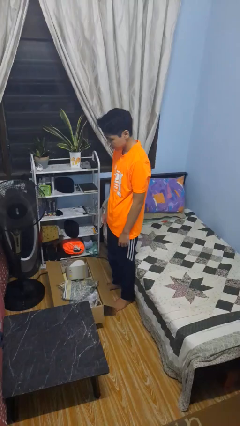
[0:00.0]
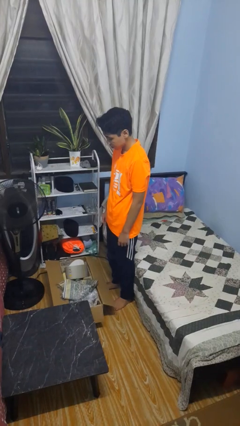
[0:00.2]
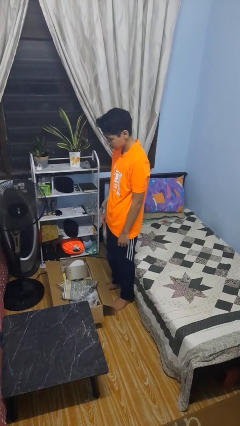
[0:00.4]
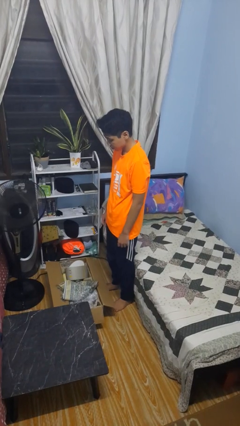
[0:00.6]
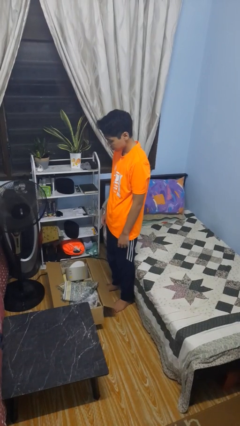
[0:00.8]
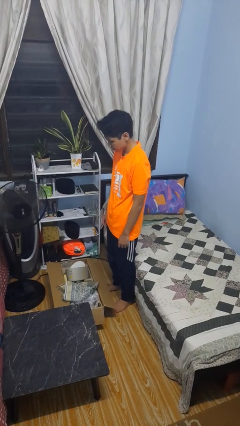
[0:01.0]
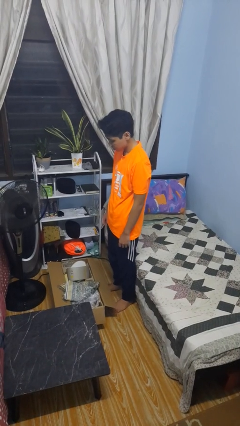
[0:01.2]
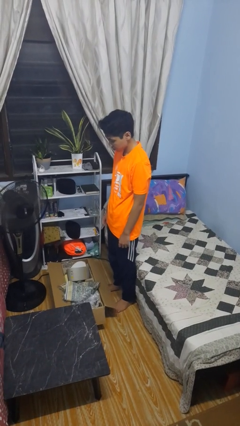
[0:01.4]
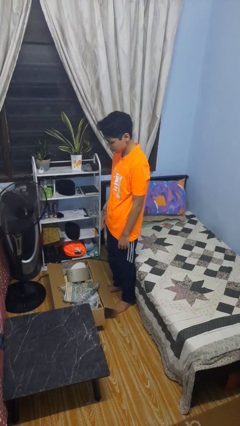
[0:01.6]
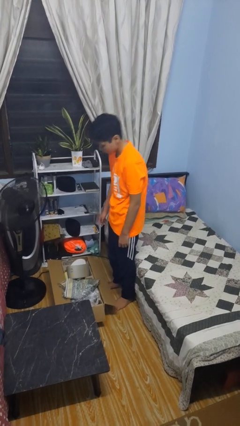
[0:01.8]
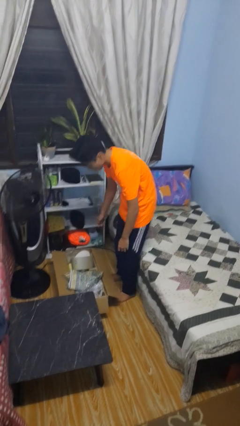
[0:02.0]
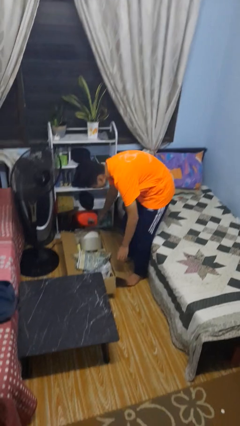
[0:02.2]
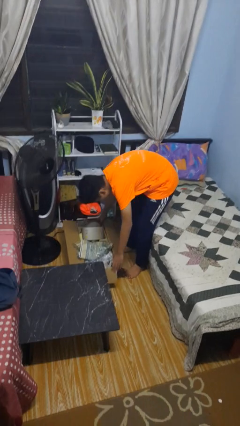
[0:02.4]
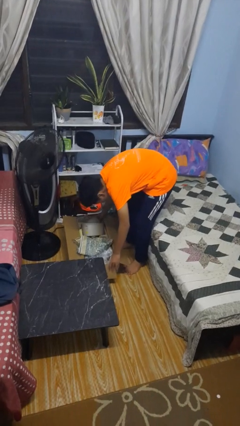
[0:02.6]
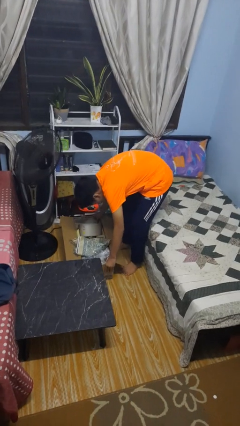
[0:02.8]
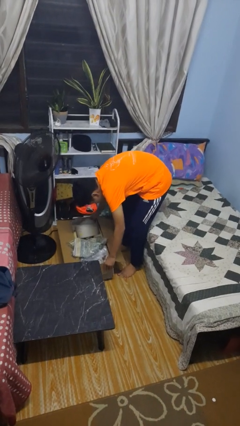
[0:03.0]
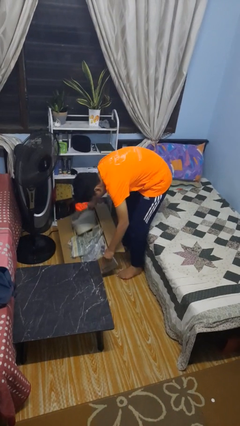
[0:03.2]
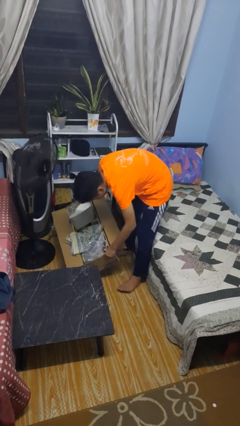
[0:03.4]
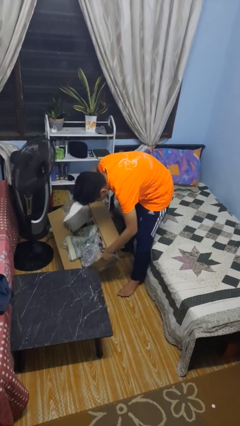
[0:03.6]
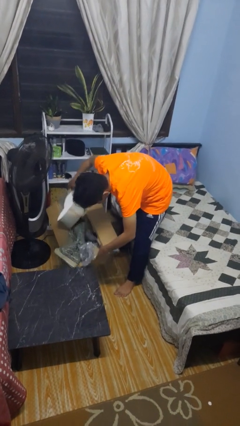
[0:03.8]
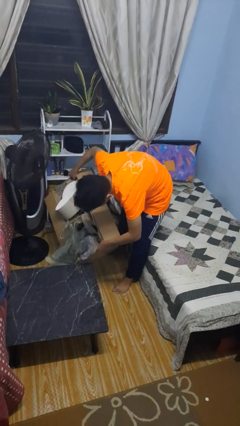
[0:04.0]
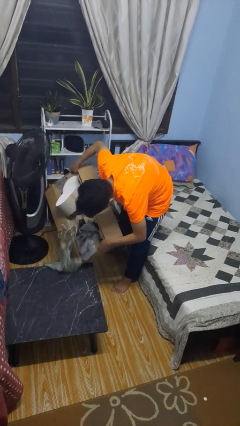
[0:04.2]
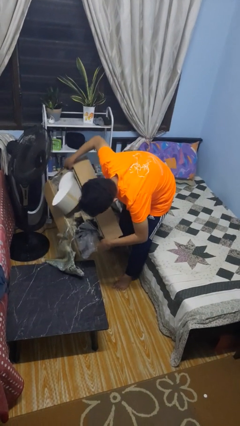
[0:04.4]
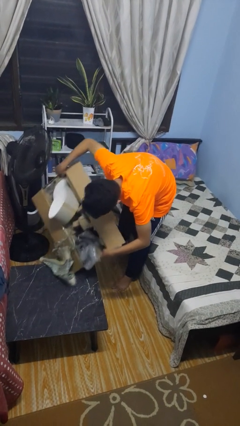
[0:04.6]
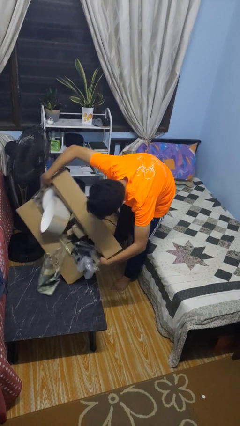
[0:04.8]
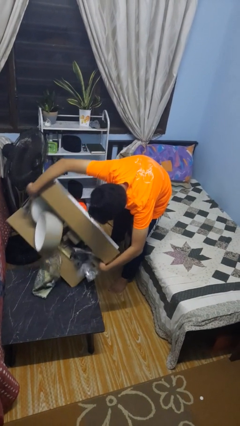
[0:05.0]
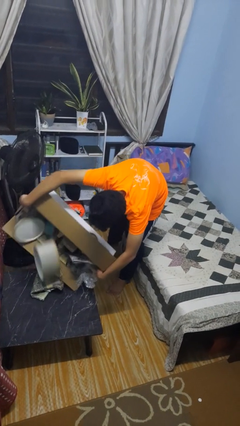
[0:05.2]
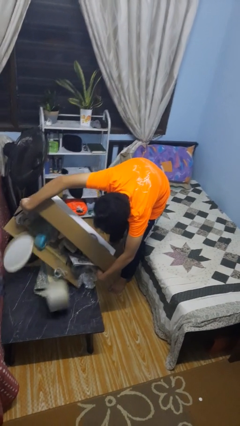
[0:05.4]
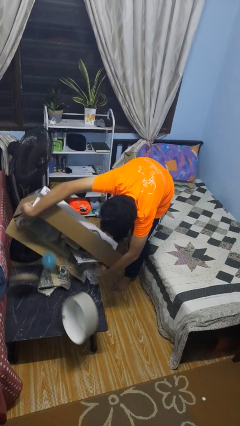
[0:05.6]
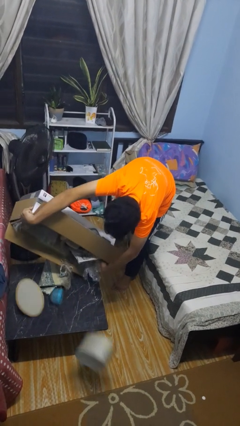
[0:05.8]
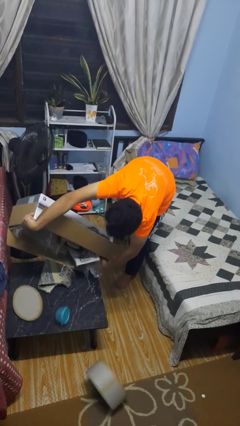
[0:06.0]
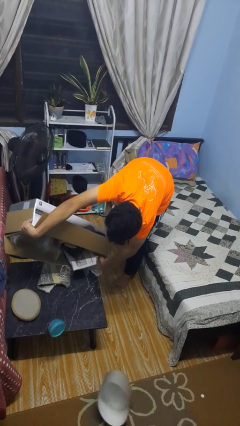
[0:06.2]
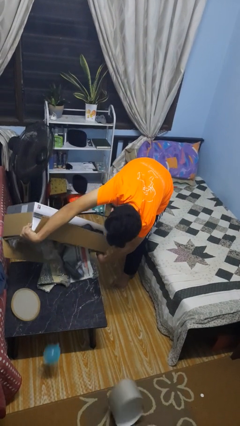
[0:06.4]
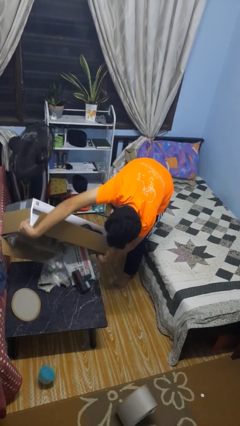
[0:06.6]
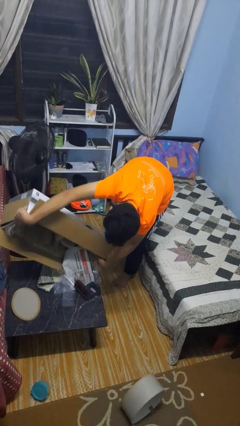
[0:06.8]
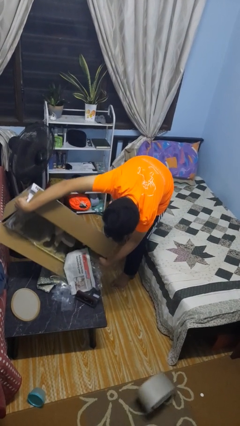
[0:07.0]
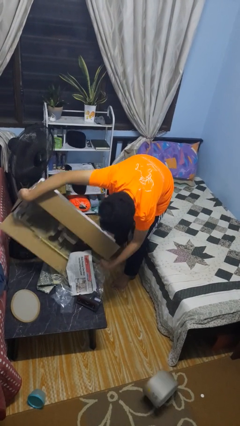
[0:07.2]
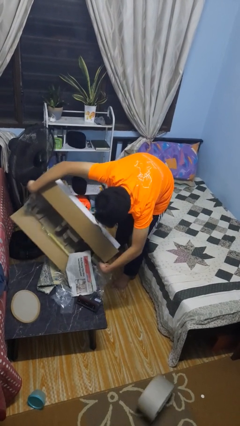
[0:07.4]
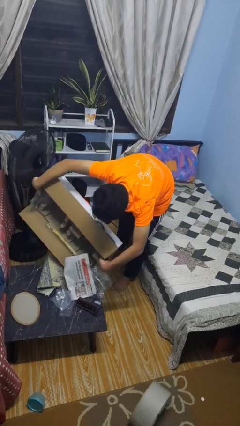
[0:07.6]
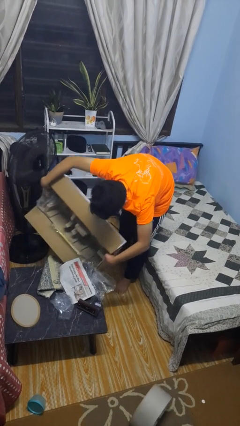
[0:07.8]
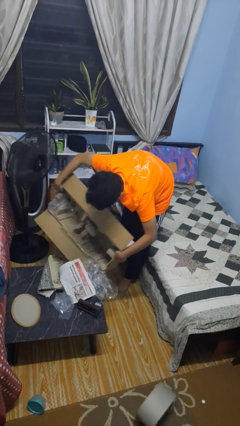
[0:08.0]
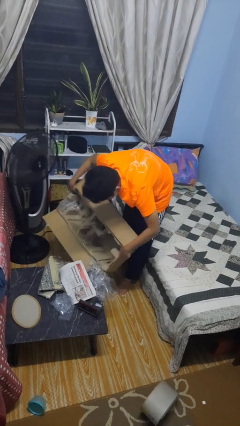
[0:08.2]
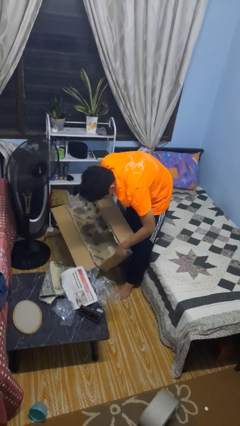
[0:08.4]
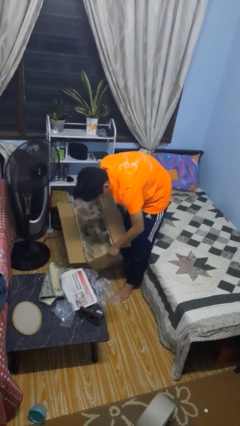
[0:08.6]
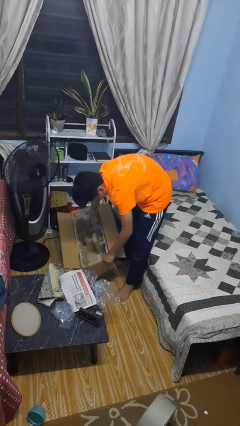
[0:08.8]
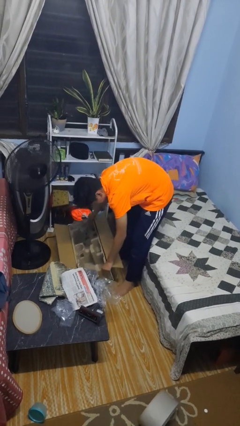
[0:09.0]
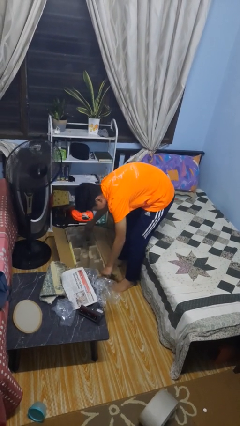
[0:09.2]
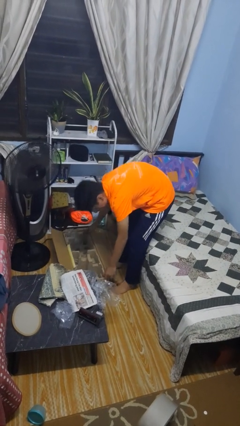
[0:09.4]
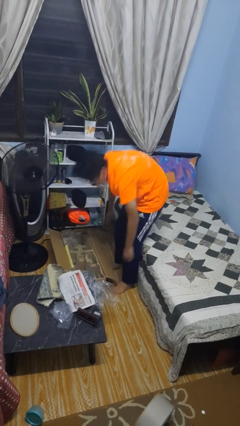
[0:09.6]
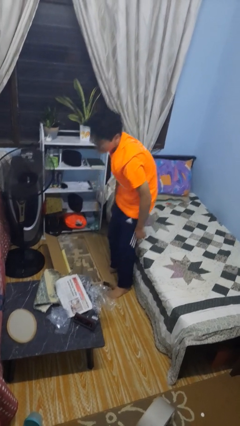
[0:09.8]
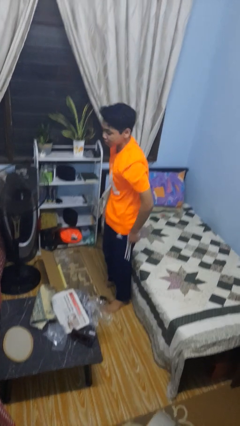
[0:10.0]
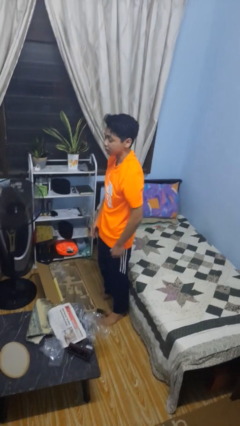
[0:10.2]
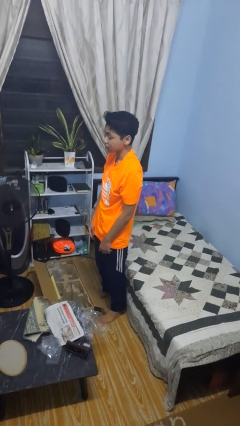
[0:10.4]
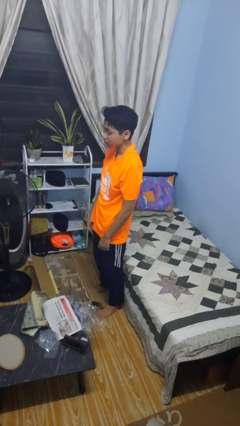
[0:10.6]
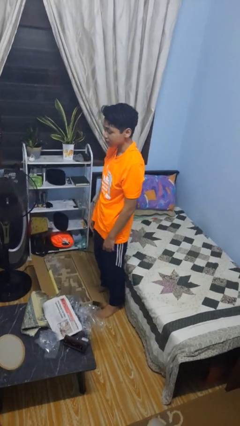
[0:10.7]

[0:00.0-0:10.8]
person unloads box onto table

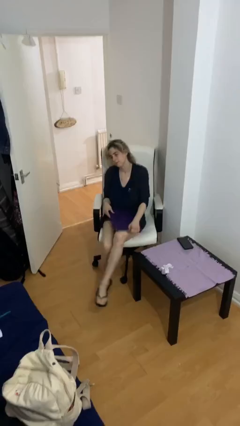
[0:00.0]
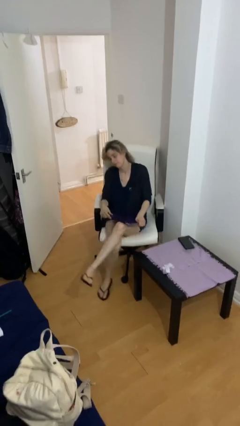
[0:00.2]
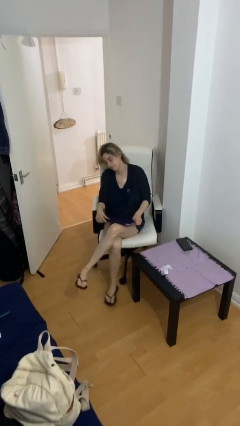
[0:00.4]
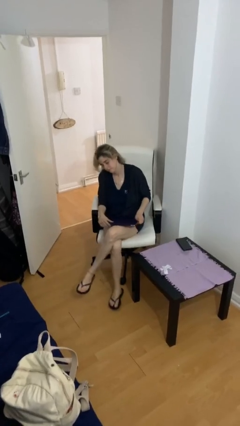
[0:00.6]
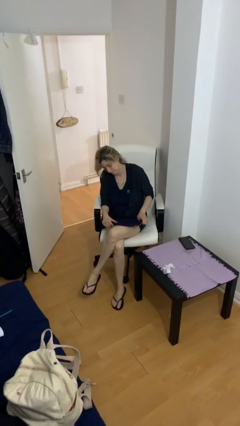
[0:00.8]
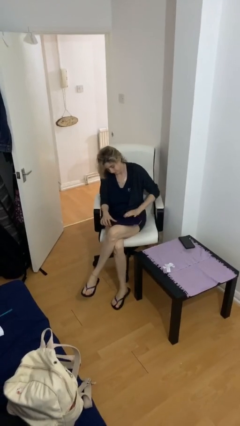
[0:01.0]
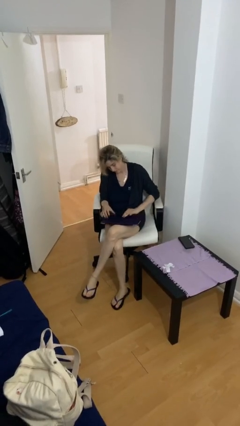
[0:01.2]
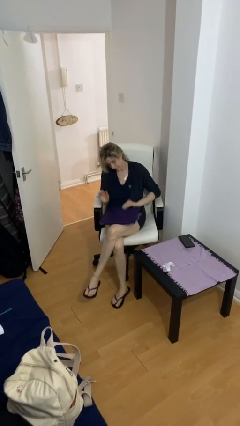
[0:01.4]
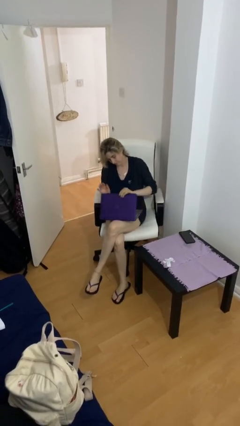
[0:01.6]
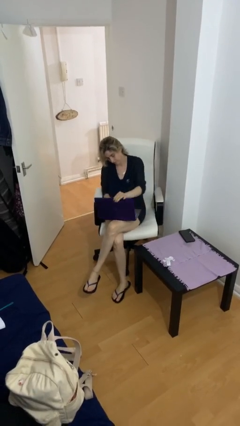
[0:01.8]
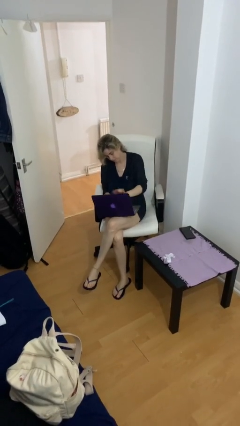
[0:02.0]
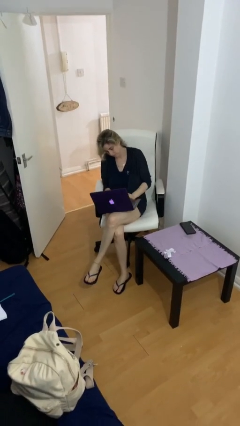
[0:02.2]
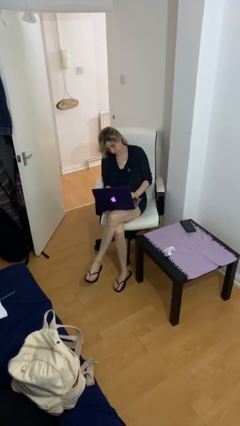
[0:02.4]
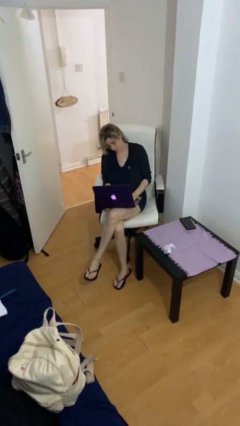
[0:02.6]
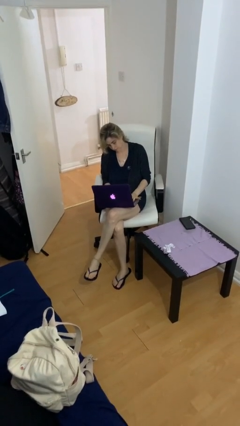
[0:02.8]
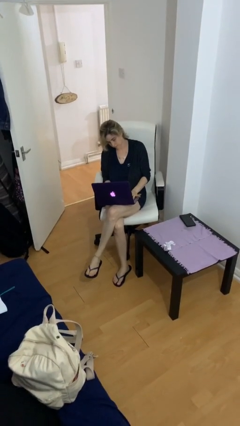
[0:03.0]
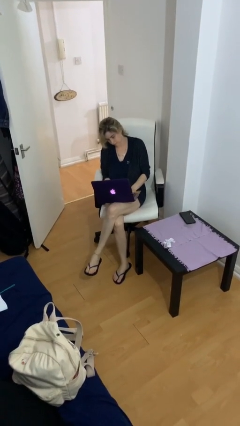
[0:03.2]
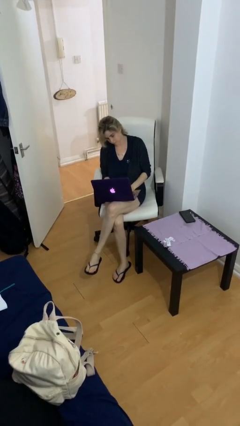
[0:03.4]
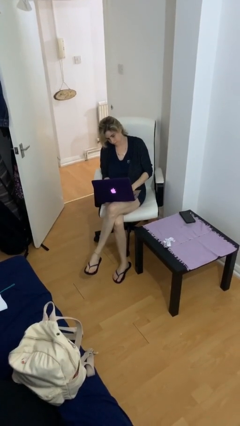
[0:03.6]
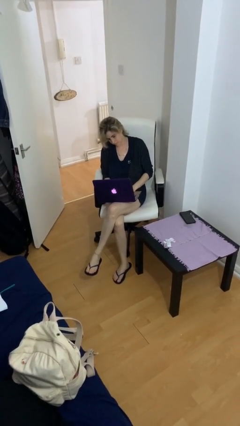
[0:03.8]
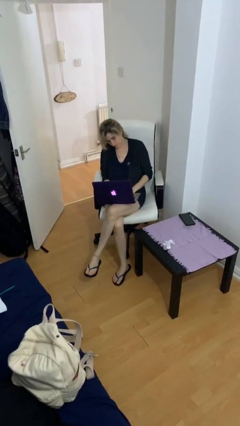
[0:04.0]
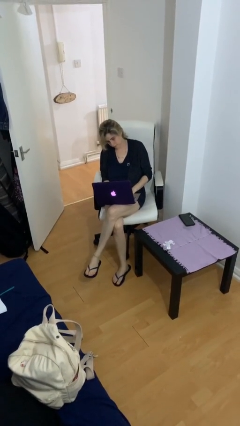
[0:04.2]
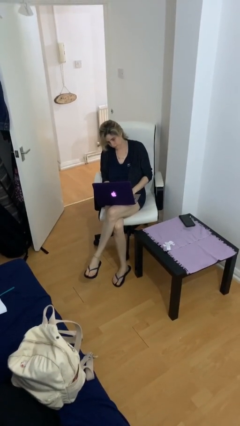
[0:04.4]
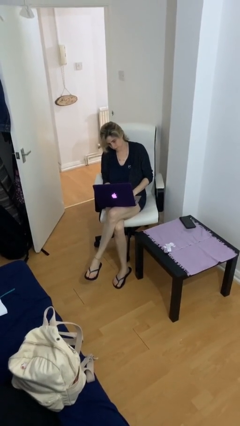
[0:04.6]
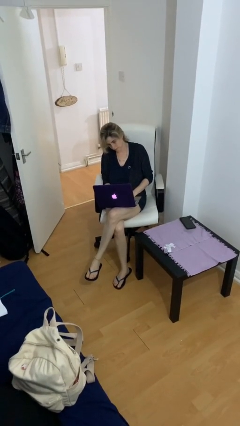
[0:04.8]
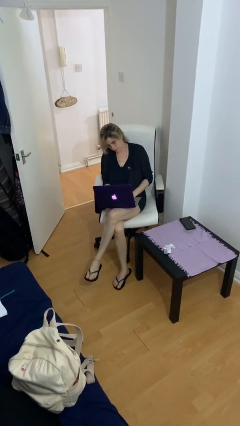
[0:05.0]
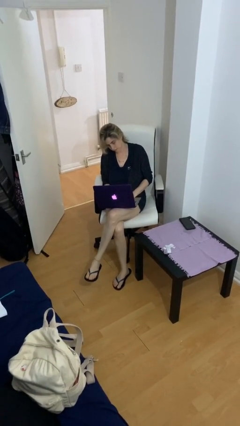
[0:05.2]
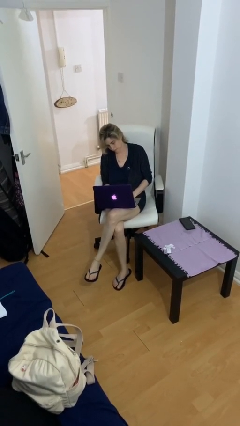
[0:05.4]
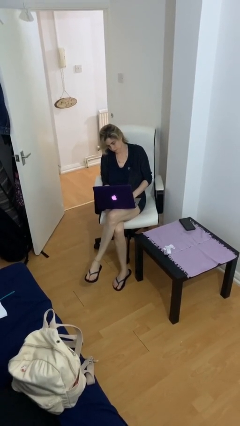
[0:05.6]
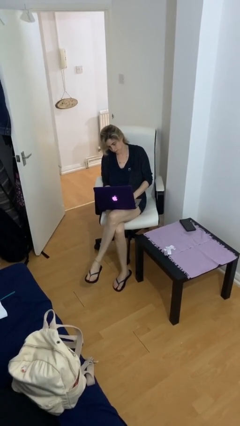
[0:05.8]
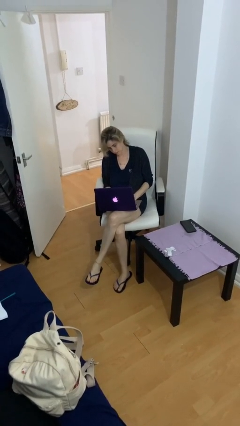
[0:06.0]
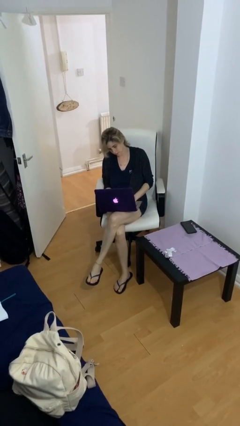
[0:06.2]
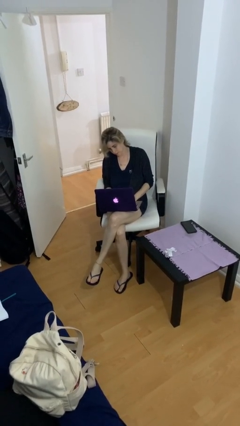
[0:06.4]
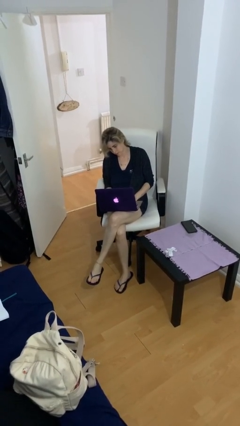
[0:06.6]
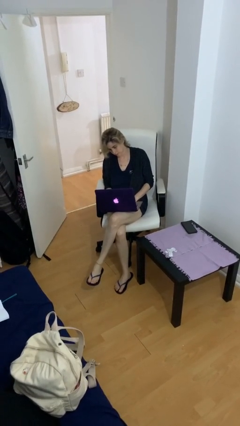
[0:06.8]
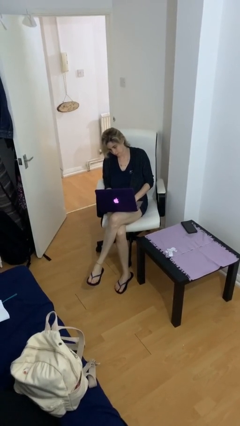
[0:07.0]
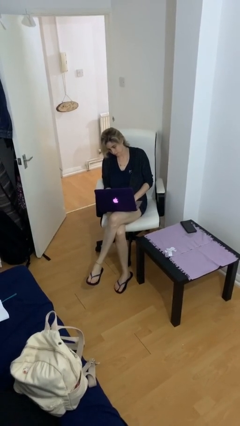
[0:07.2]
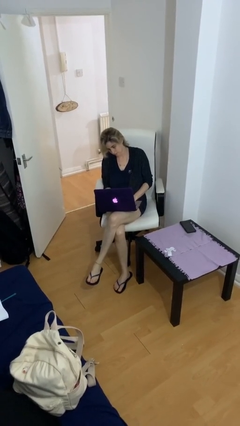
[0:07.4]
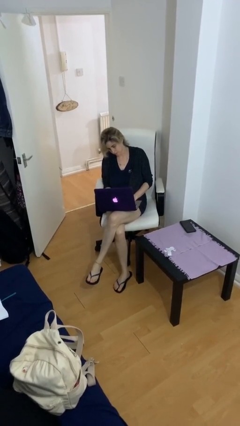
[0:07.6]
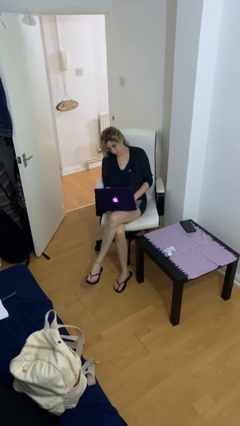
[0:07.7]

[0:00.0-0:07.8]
person interacts with laptop
